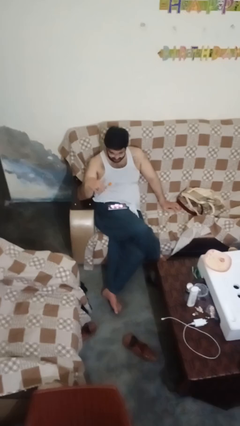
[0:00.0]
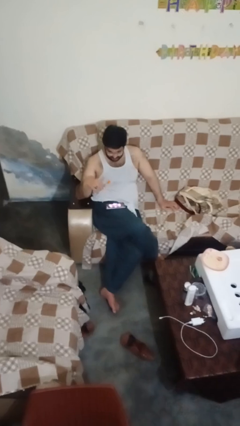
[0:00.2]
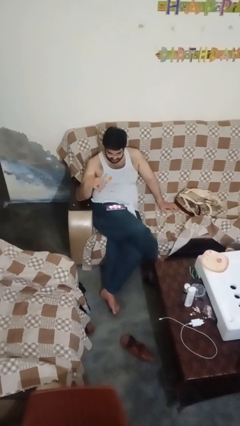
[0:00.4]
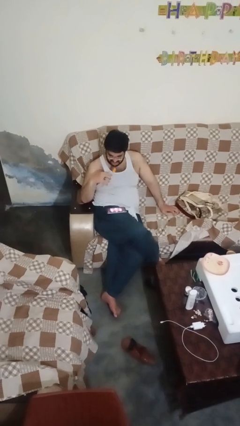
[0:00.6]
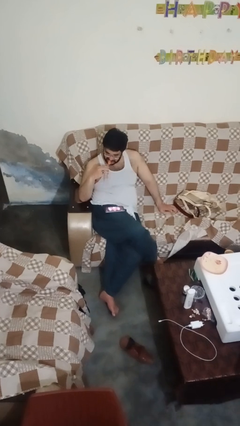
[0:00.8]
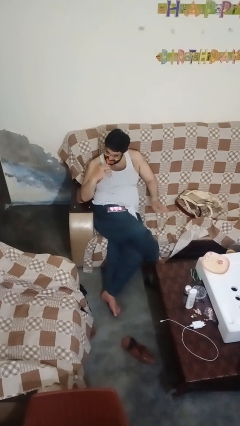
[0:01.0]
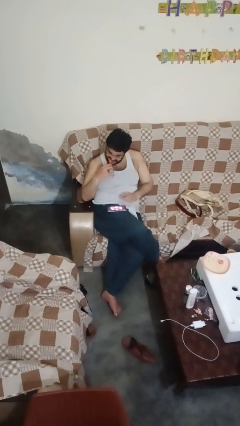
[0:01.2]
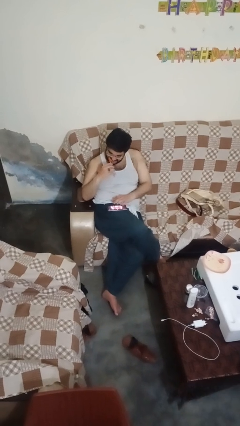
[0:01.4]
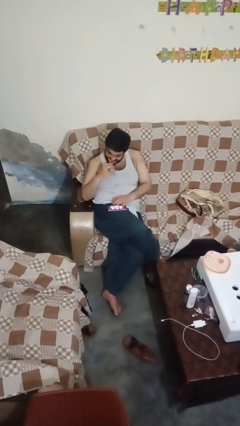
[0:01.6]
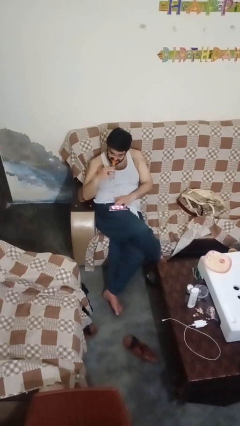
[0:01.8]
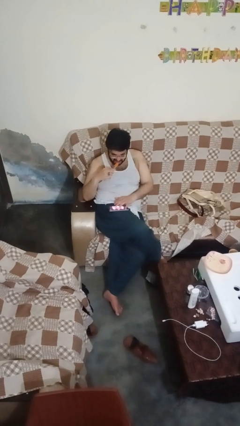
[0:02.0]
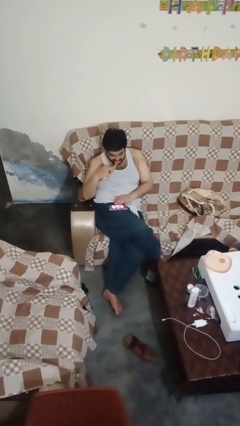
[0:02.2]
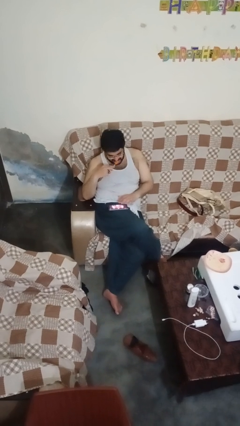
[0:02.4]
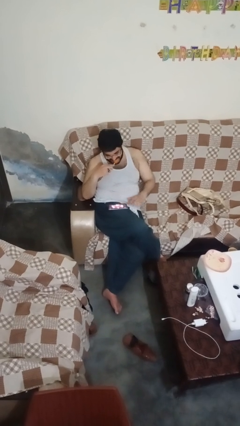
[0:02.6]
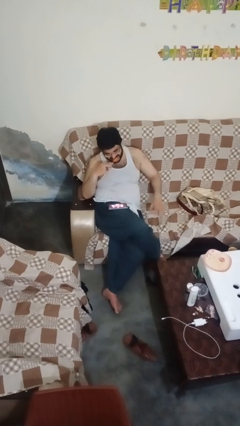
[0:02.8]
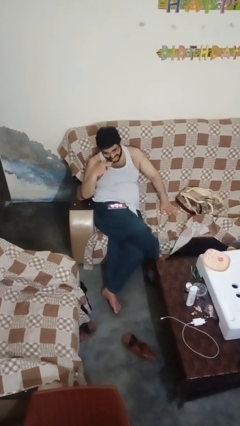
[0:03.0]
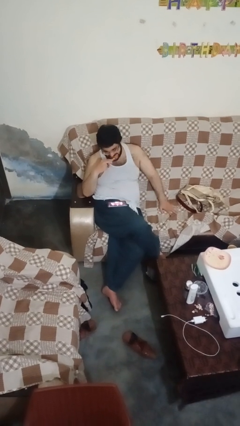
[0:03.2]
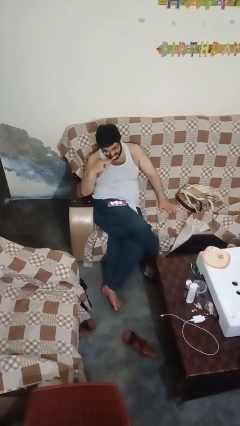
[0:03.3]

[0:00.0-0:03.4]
person brushes teeth

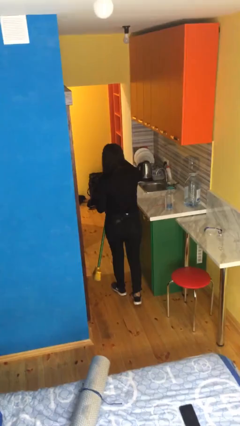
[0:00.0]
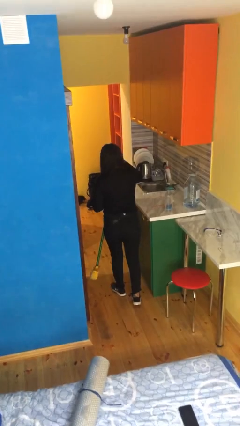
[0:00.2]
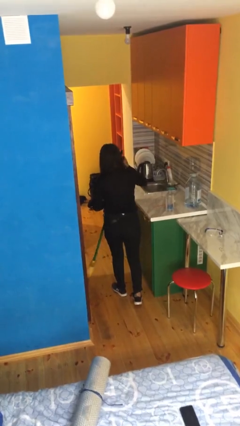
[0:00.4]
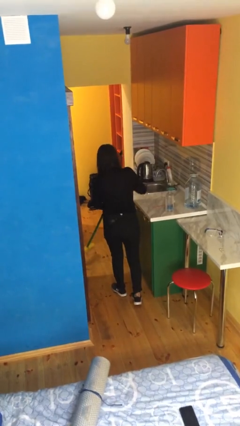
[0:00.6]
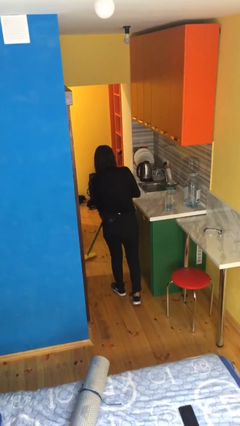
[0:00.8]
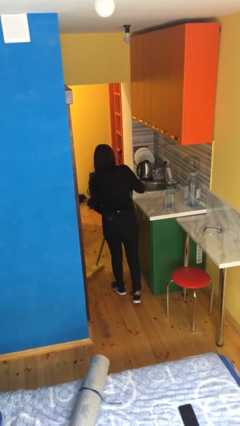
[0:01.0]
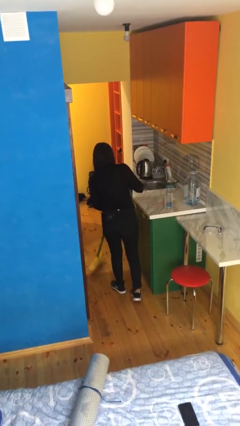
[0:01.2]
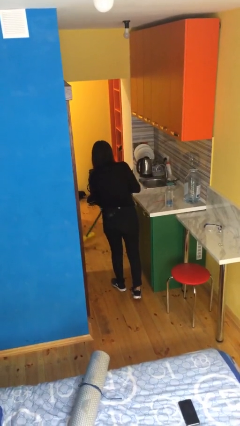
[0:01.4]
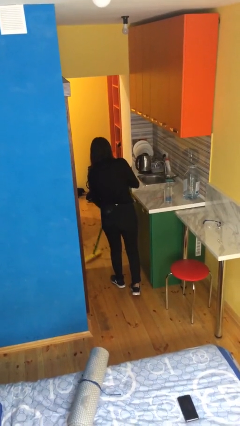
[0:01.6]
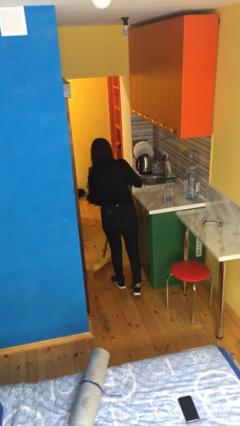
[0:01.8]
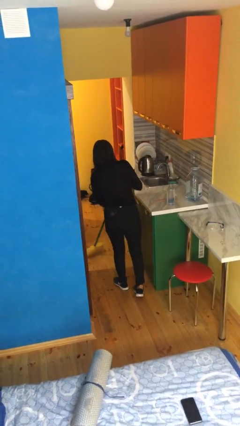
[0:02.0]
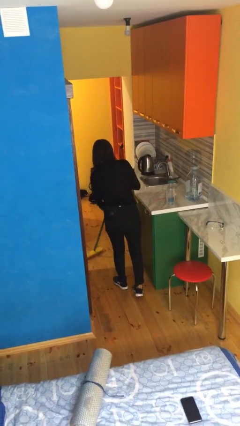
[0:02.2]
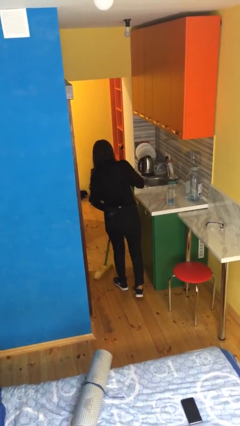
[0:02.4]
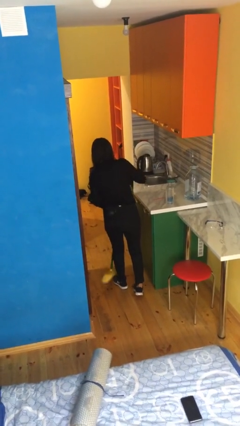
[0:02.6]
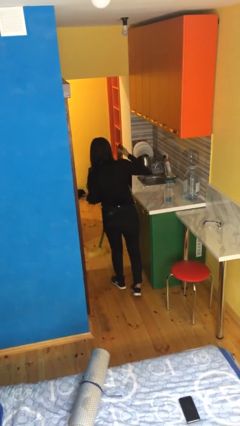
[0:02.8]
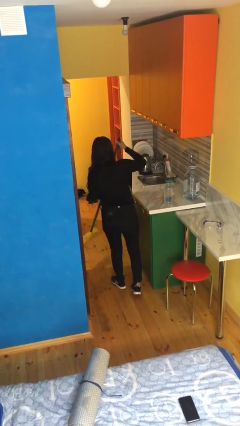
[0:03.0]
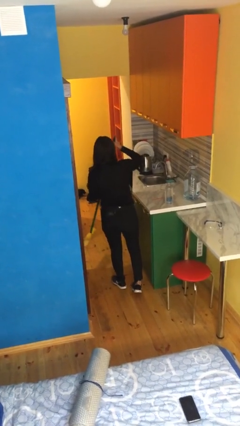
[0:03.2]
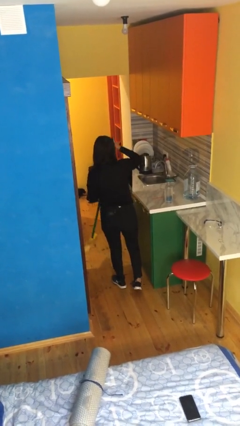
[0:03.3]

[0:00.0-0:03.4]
person sweeps floor

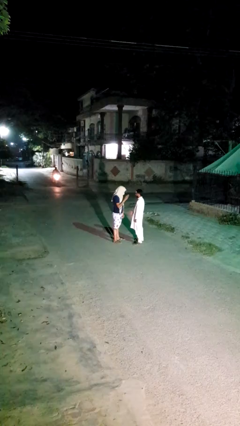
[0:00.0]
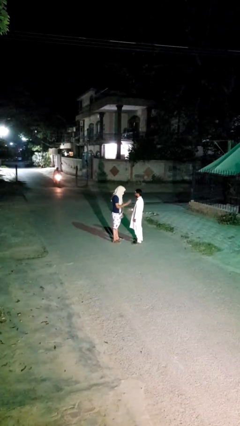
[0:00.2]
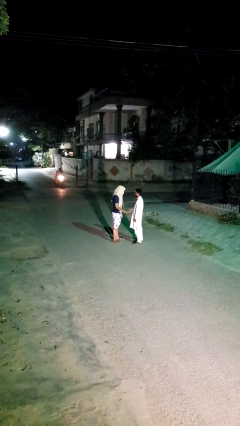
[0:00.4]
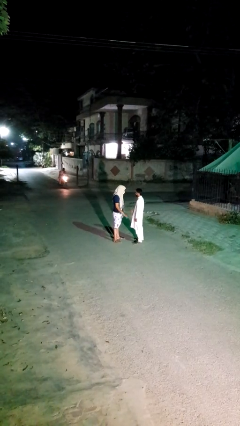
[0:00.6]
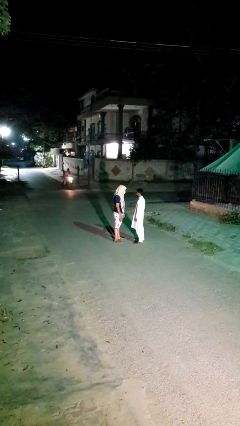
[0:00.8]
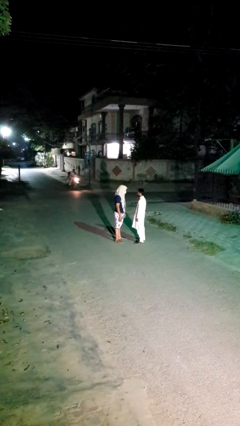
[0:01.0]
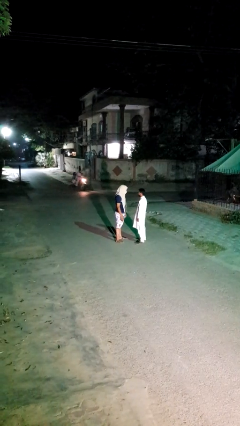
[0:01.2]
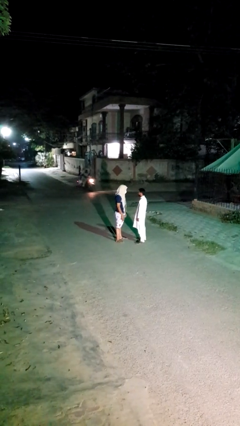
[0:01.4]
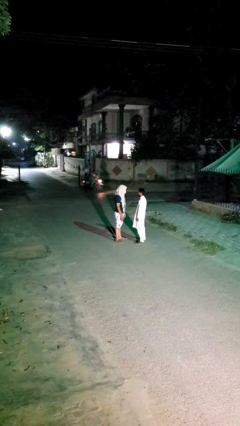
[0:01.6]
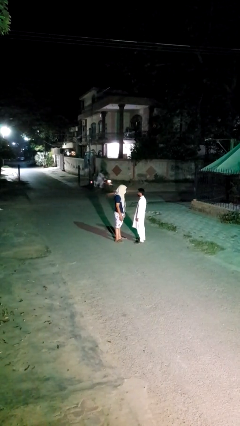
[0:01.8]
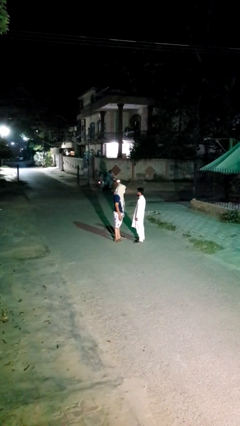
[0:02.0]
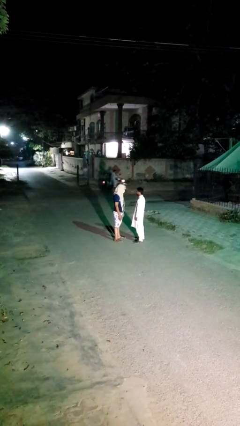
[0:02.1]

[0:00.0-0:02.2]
person highfives hand

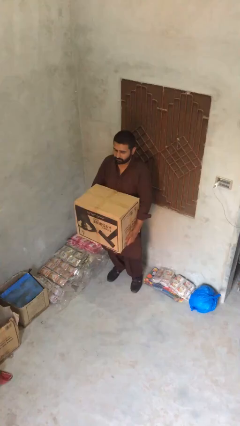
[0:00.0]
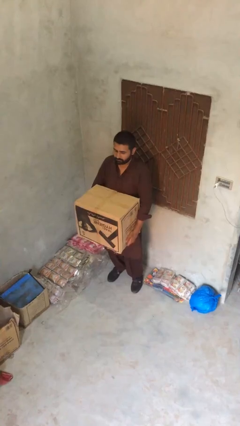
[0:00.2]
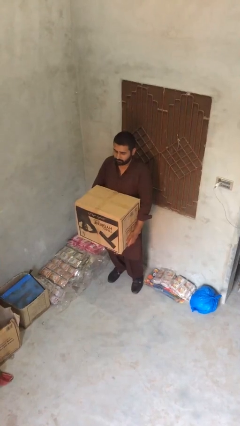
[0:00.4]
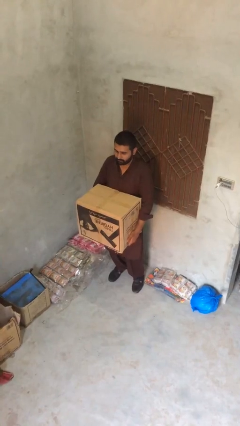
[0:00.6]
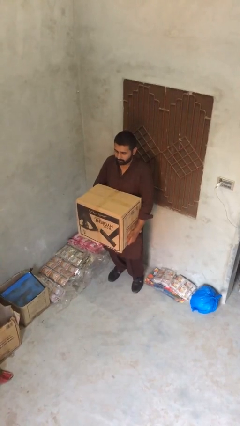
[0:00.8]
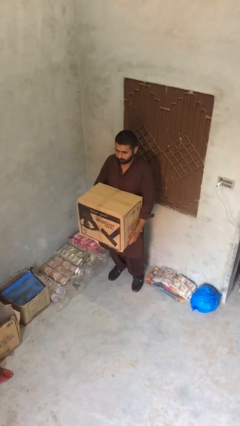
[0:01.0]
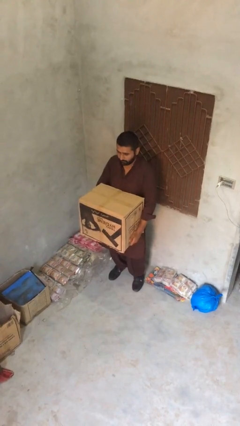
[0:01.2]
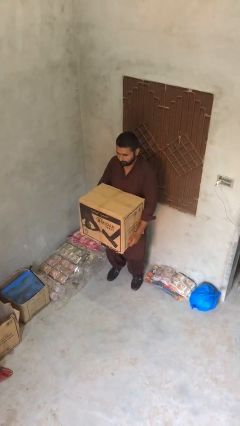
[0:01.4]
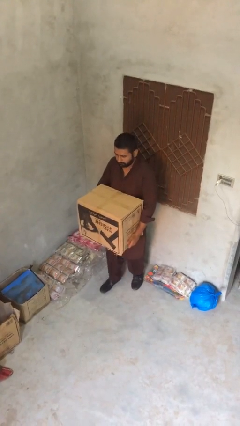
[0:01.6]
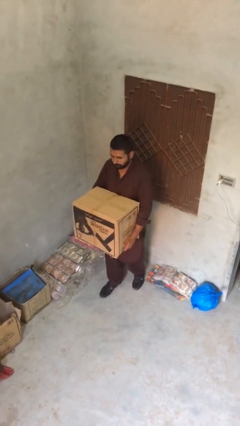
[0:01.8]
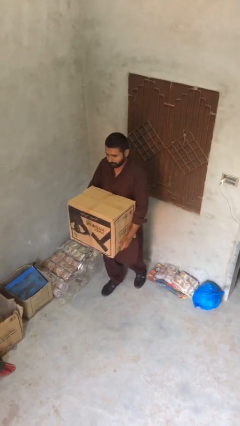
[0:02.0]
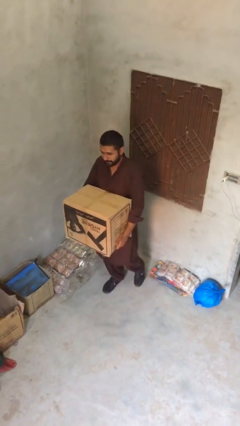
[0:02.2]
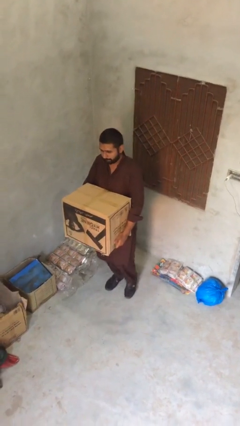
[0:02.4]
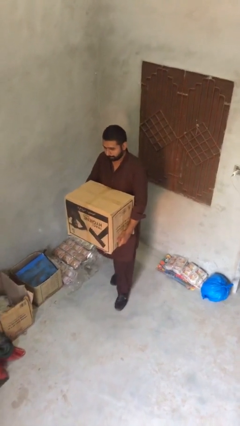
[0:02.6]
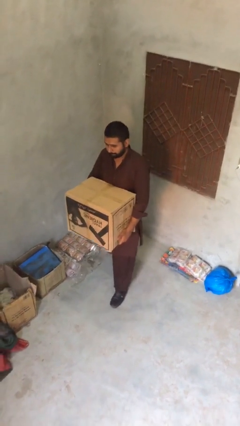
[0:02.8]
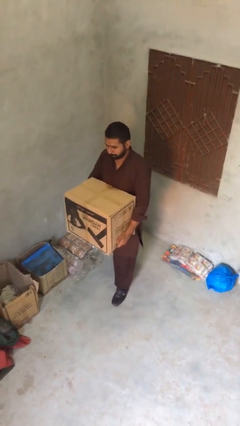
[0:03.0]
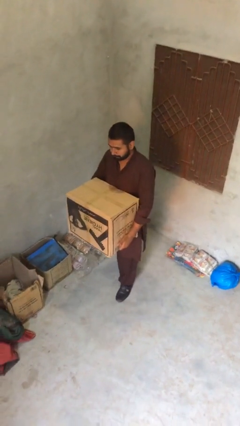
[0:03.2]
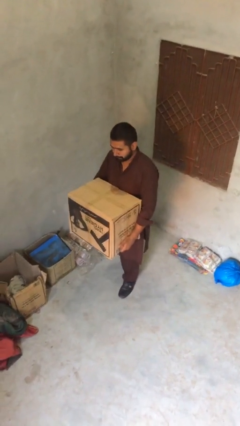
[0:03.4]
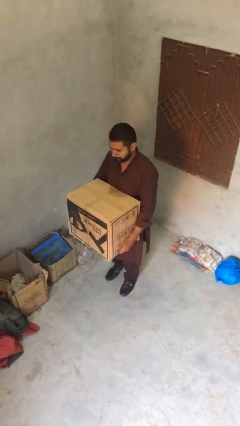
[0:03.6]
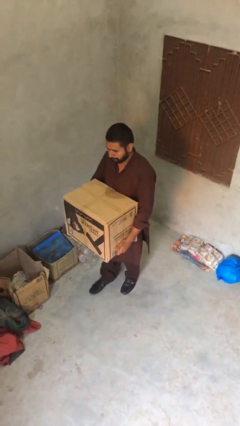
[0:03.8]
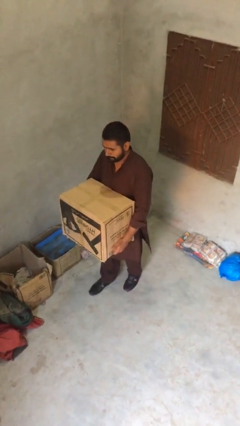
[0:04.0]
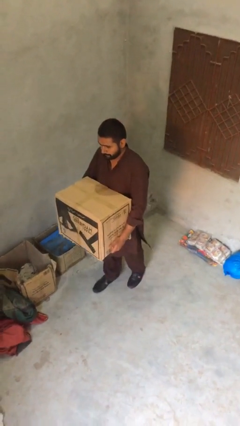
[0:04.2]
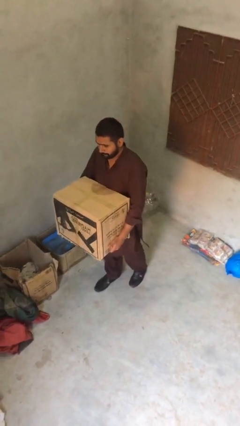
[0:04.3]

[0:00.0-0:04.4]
person carries heavy object

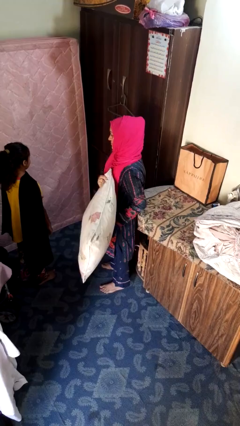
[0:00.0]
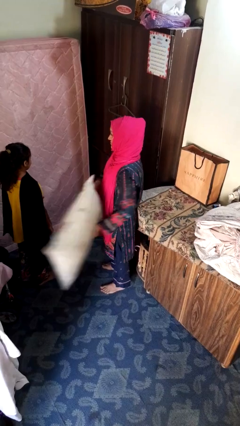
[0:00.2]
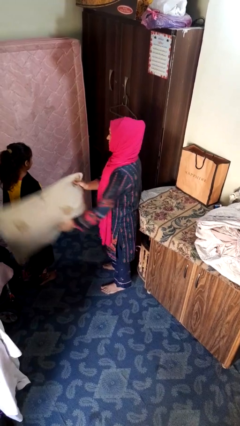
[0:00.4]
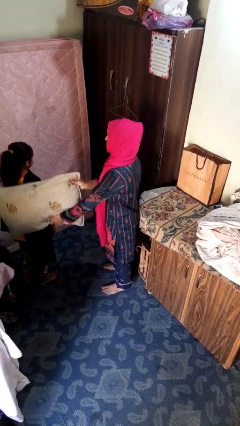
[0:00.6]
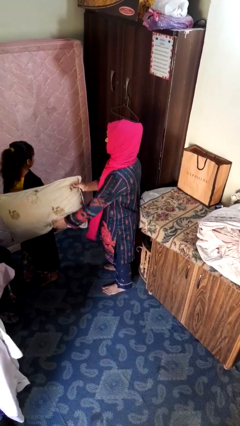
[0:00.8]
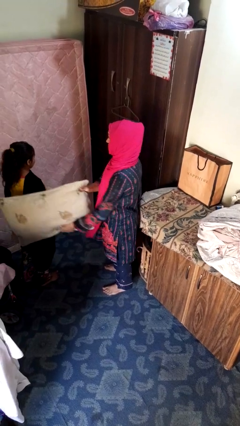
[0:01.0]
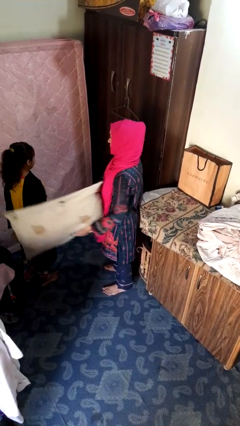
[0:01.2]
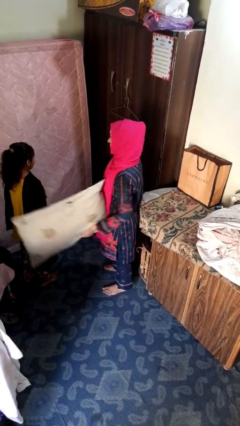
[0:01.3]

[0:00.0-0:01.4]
person hits person with pillow

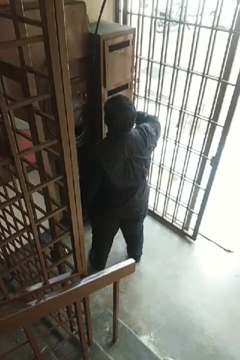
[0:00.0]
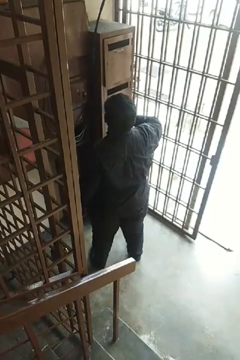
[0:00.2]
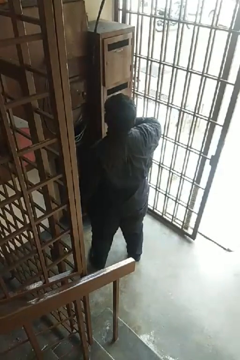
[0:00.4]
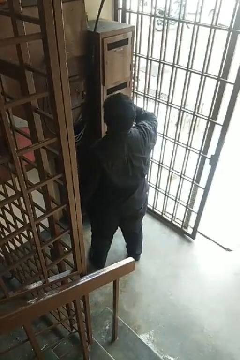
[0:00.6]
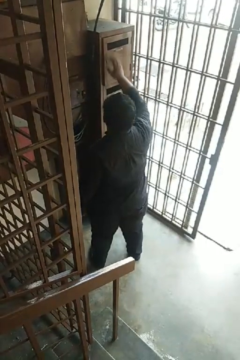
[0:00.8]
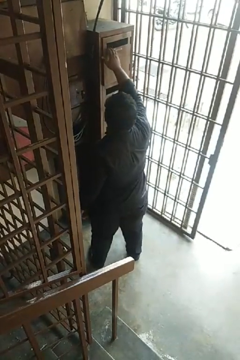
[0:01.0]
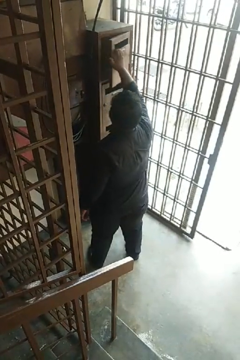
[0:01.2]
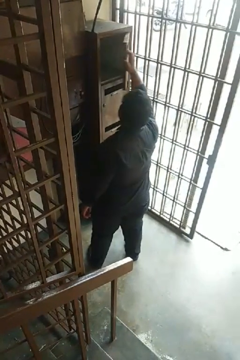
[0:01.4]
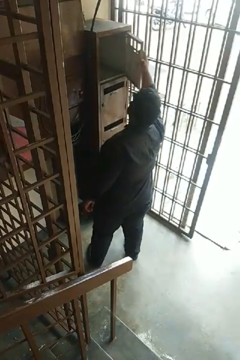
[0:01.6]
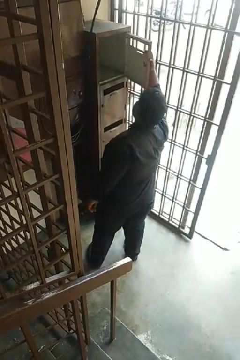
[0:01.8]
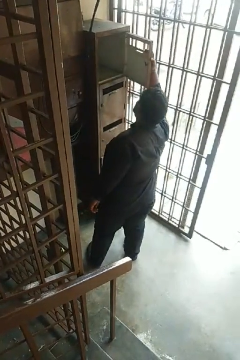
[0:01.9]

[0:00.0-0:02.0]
person opens mailbox

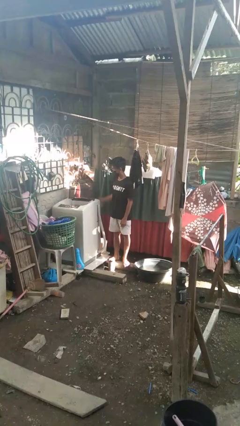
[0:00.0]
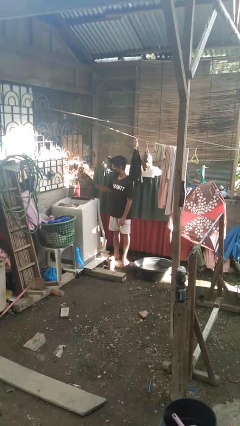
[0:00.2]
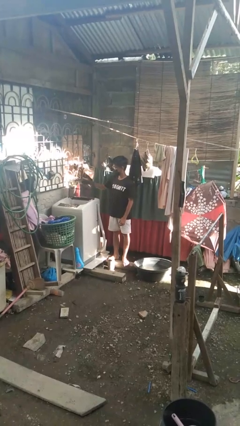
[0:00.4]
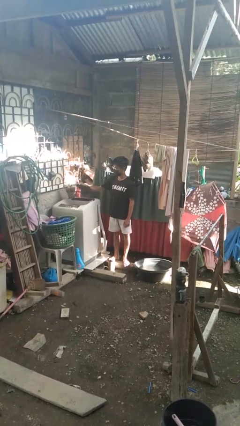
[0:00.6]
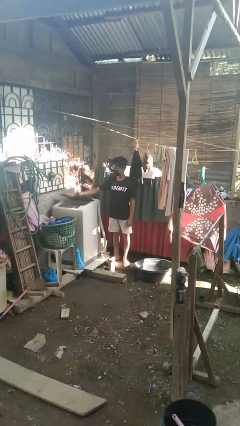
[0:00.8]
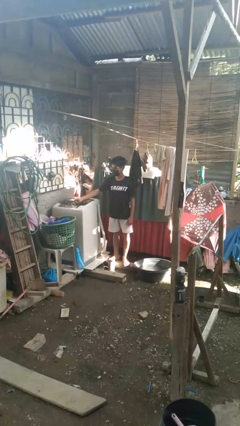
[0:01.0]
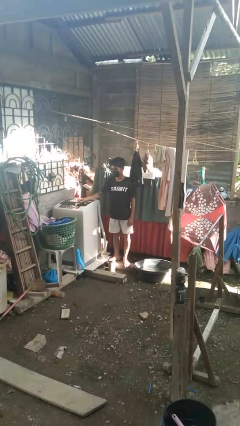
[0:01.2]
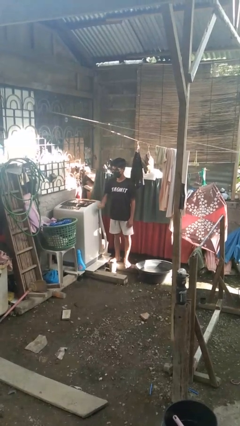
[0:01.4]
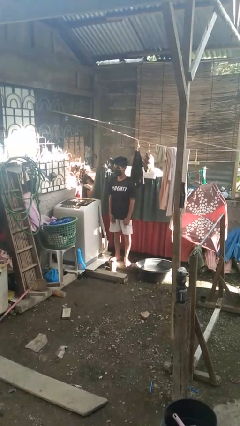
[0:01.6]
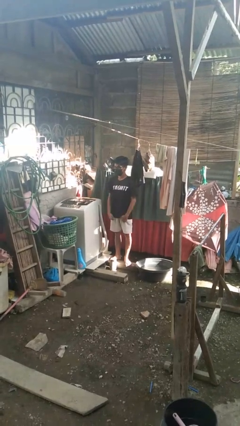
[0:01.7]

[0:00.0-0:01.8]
person closes clothes washer
